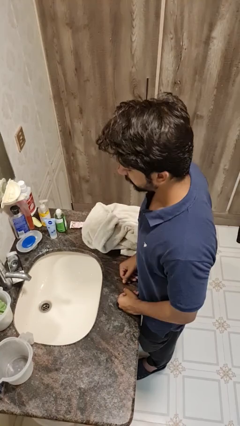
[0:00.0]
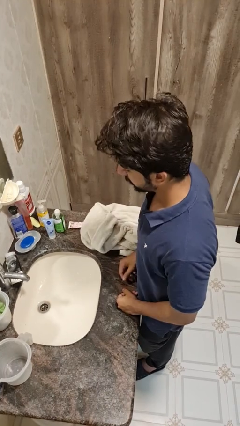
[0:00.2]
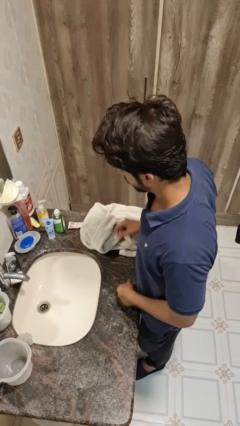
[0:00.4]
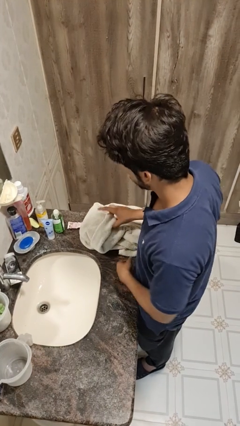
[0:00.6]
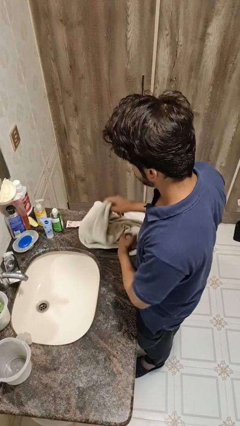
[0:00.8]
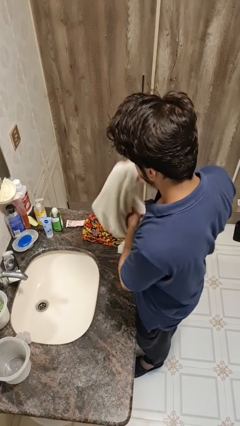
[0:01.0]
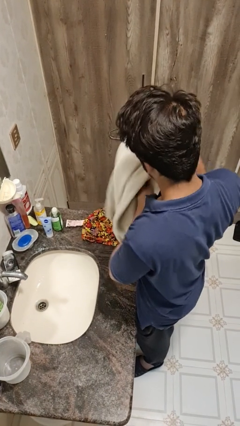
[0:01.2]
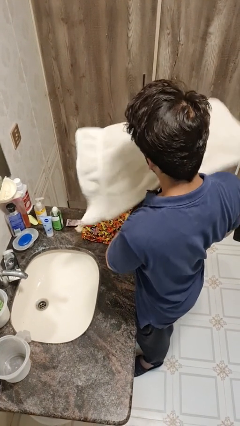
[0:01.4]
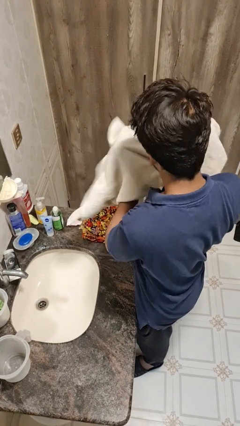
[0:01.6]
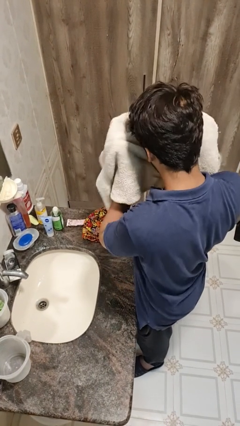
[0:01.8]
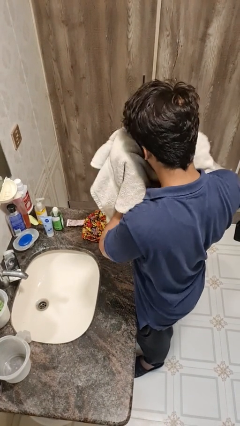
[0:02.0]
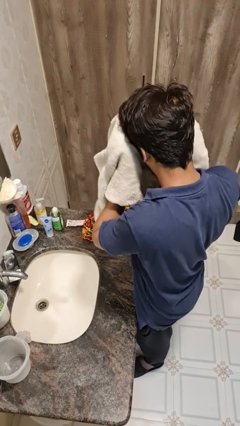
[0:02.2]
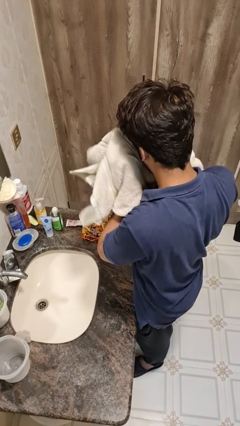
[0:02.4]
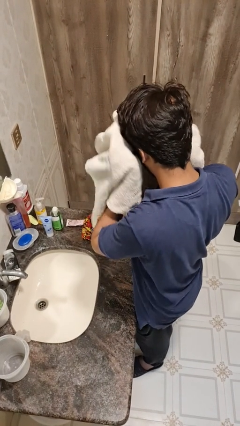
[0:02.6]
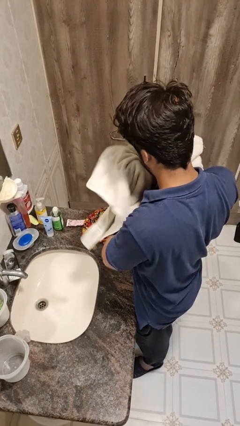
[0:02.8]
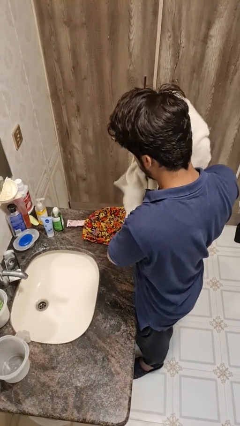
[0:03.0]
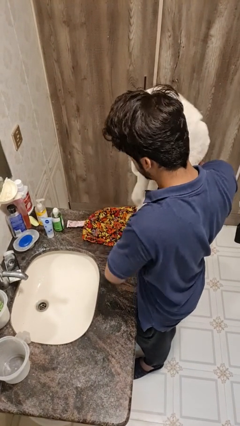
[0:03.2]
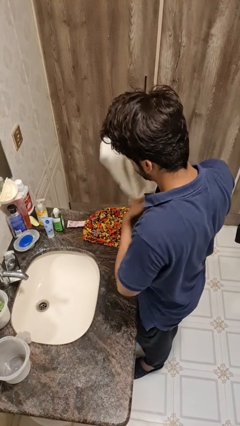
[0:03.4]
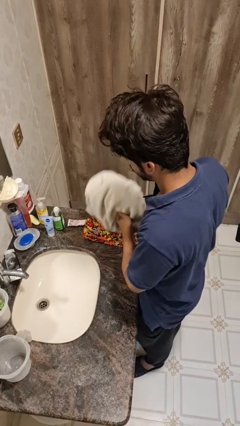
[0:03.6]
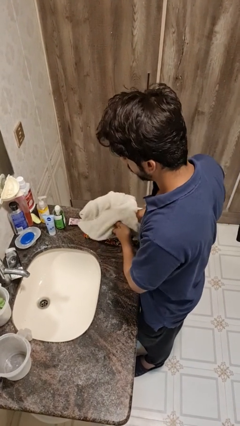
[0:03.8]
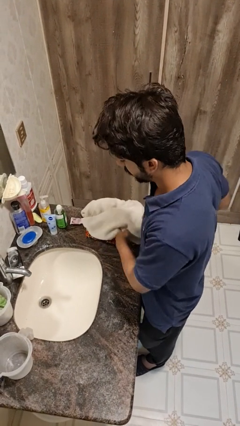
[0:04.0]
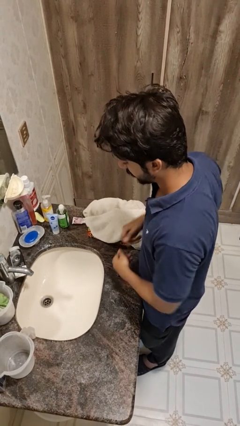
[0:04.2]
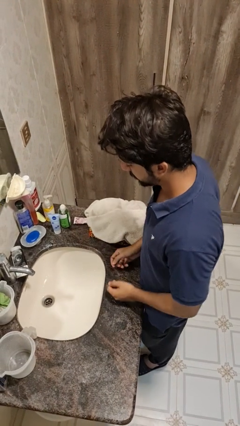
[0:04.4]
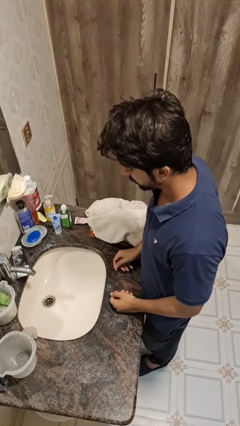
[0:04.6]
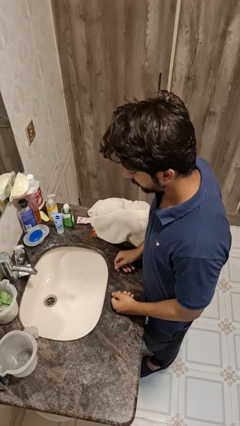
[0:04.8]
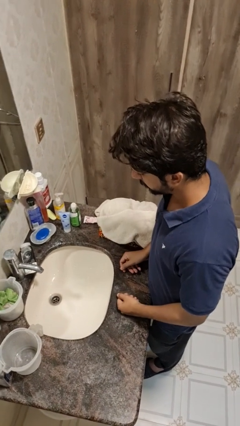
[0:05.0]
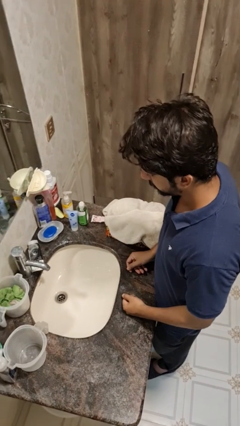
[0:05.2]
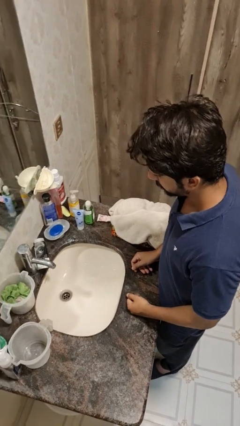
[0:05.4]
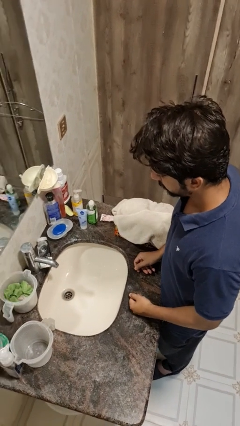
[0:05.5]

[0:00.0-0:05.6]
person dries face with towel

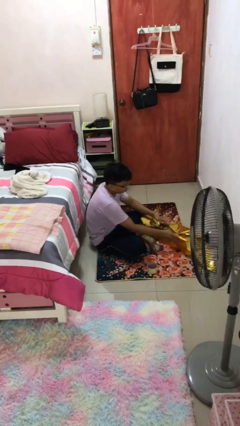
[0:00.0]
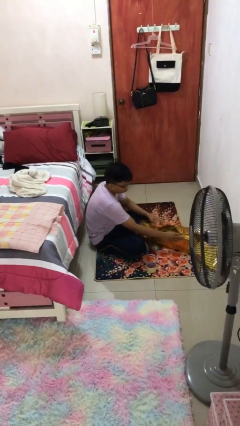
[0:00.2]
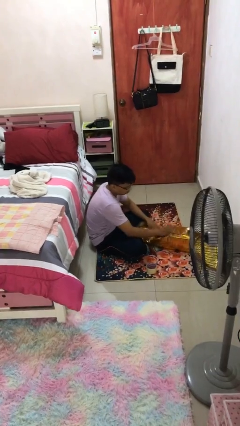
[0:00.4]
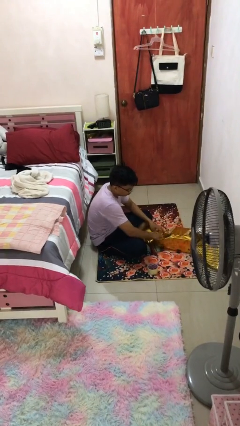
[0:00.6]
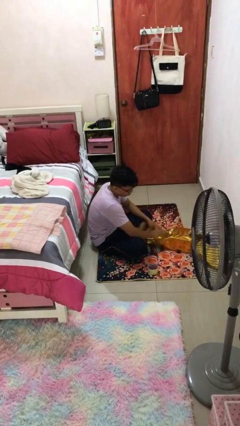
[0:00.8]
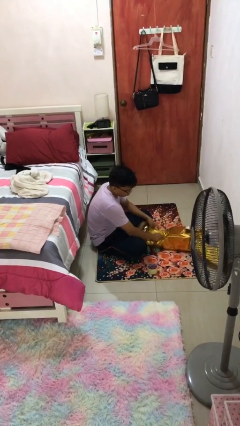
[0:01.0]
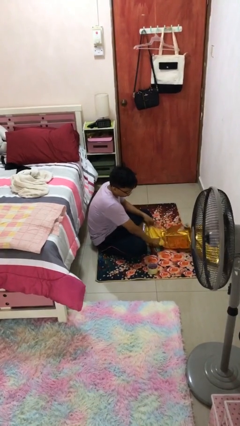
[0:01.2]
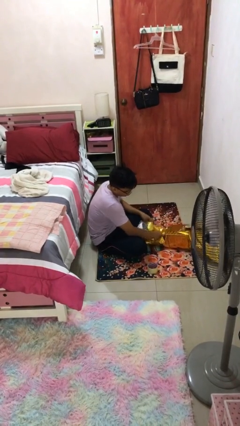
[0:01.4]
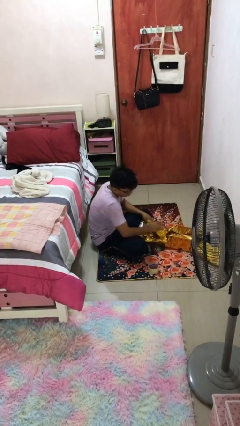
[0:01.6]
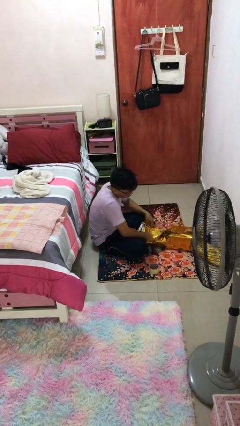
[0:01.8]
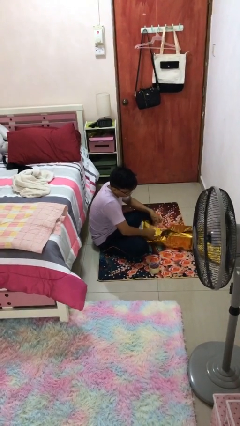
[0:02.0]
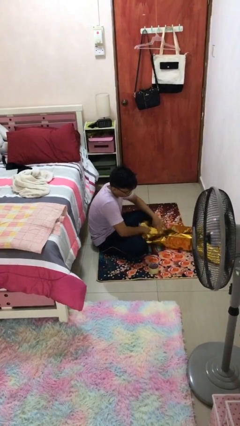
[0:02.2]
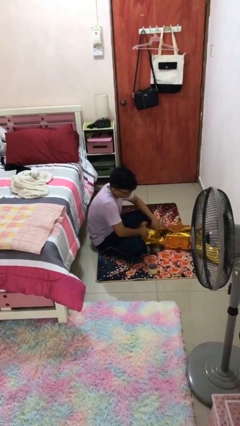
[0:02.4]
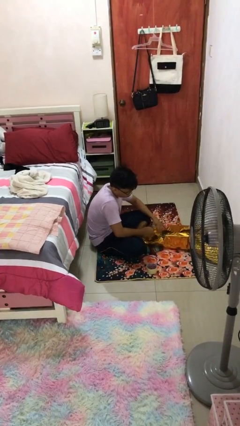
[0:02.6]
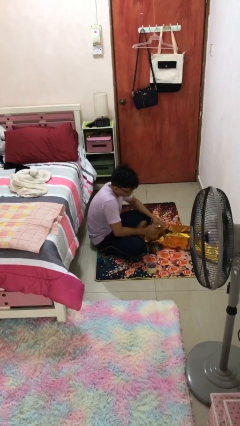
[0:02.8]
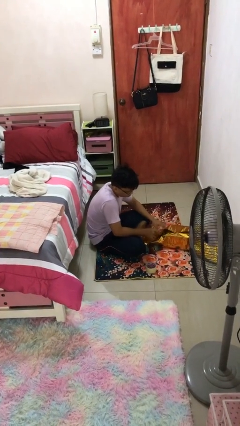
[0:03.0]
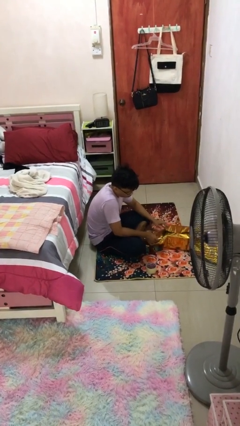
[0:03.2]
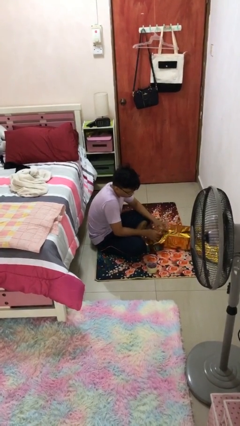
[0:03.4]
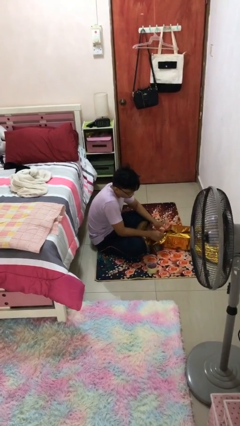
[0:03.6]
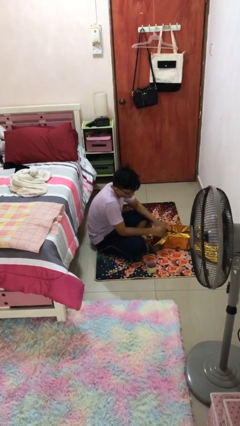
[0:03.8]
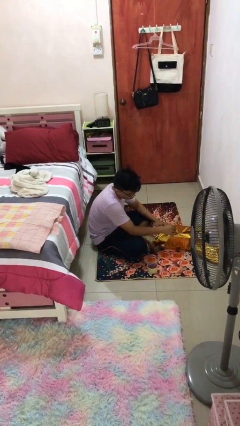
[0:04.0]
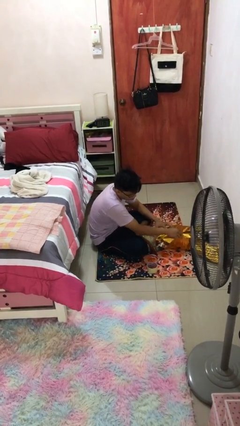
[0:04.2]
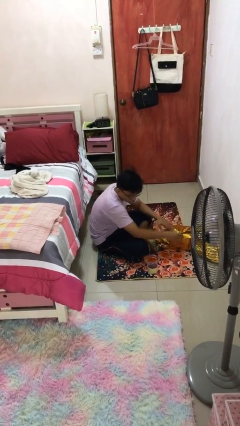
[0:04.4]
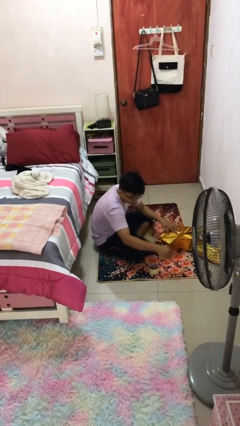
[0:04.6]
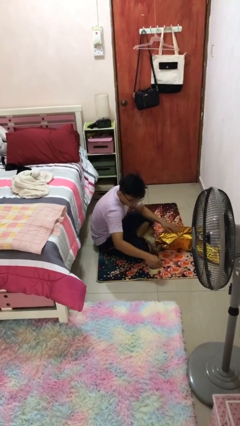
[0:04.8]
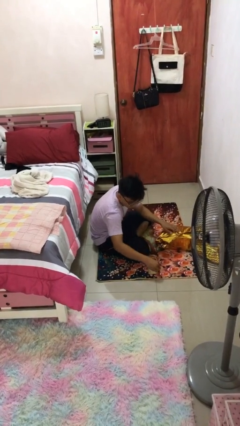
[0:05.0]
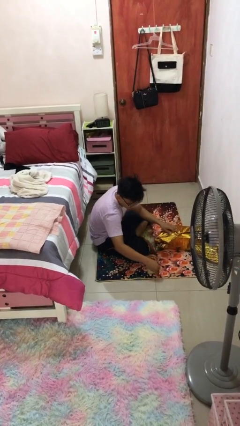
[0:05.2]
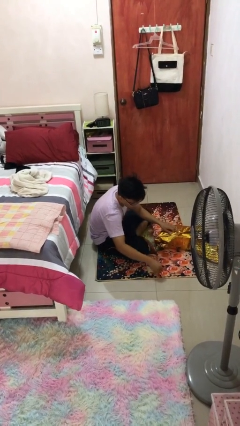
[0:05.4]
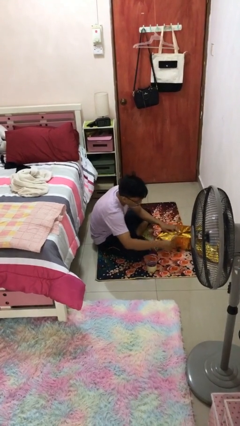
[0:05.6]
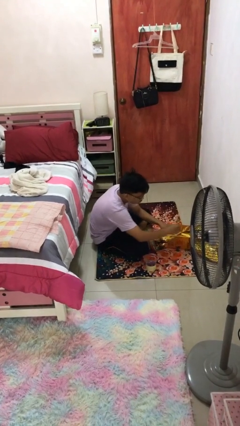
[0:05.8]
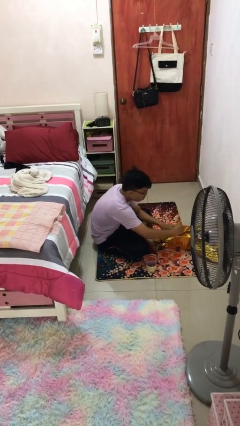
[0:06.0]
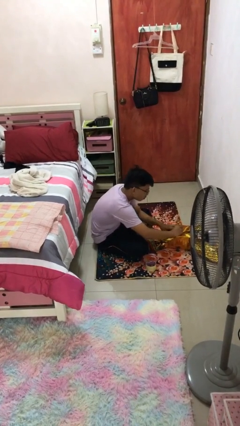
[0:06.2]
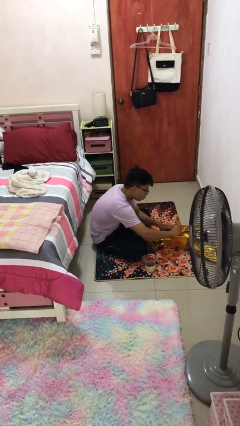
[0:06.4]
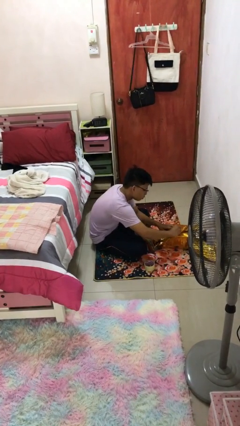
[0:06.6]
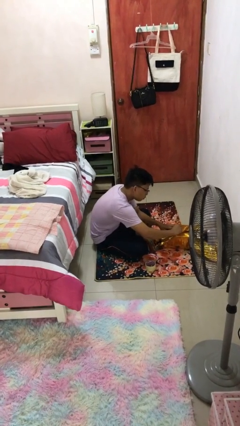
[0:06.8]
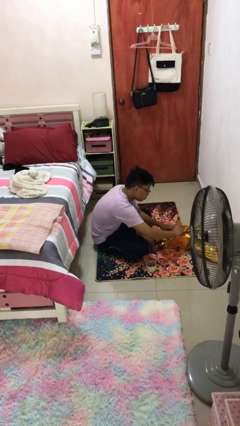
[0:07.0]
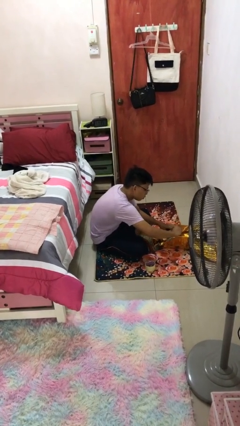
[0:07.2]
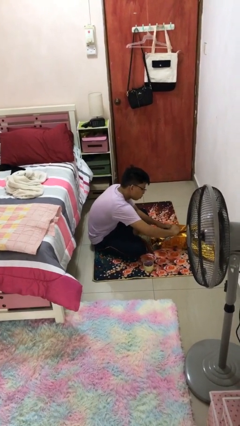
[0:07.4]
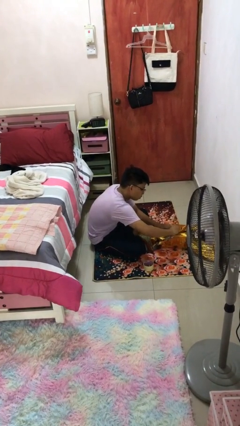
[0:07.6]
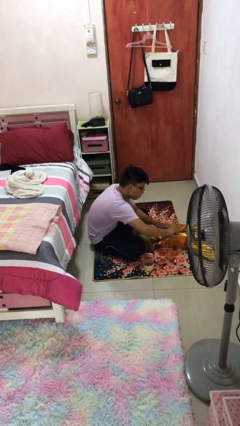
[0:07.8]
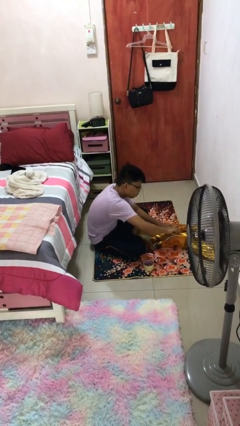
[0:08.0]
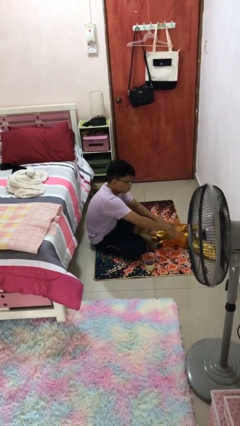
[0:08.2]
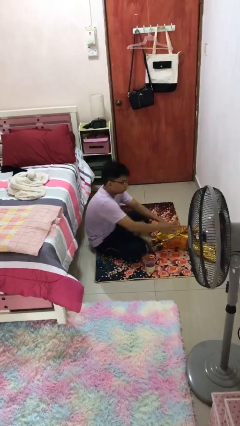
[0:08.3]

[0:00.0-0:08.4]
person wraps box

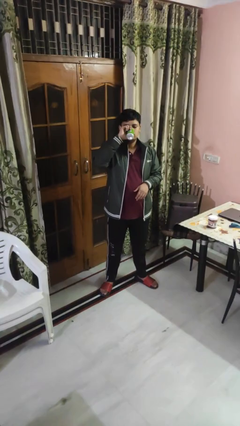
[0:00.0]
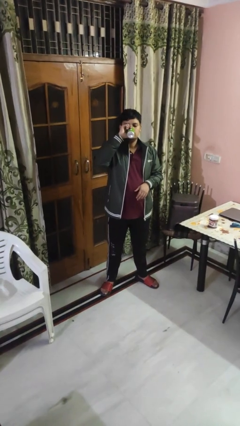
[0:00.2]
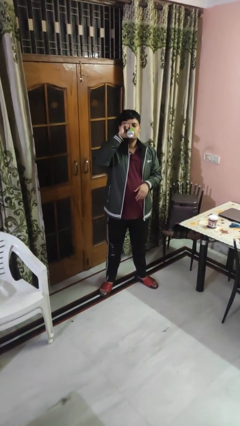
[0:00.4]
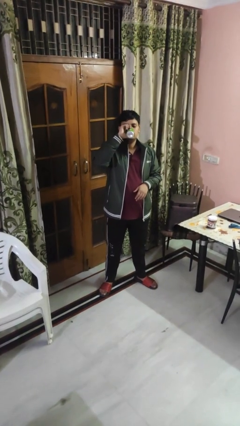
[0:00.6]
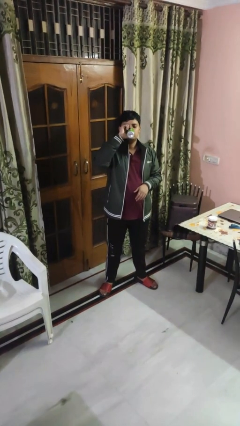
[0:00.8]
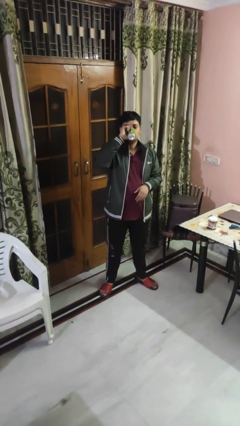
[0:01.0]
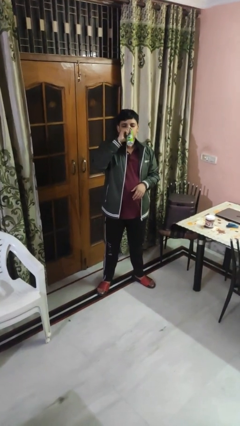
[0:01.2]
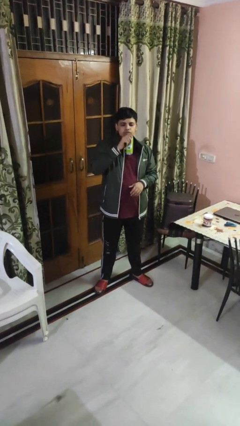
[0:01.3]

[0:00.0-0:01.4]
person drinks from beverage can

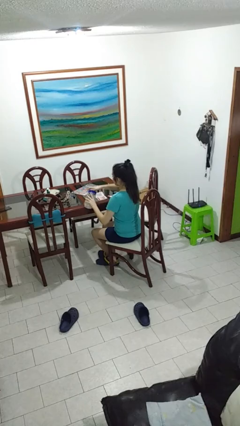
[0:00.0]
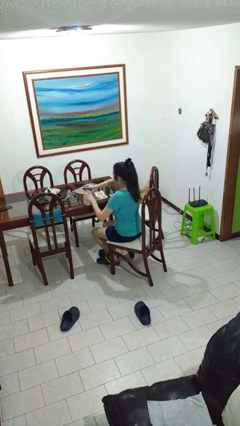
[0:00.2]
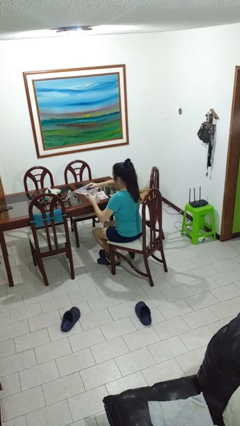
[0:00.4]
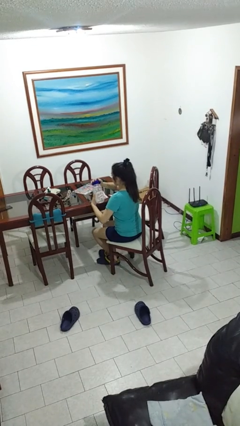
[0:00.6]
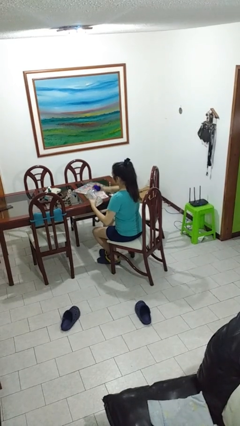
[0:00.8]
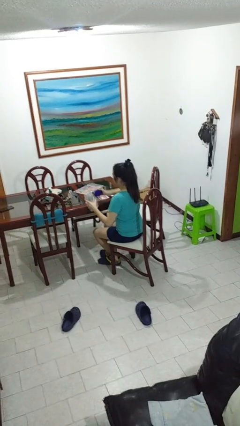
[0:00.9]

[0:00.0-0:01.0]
person opens jar

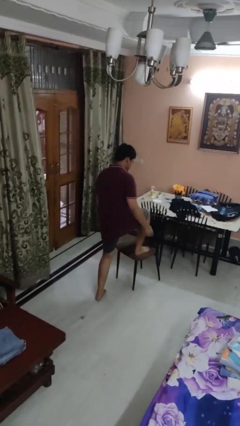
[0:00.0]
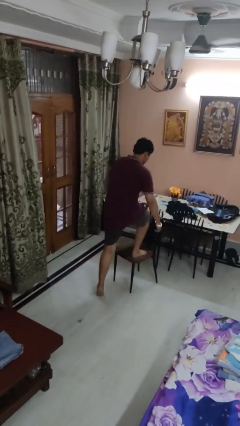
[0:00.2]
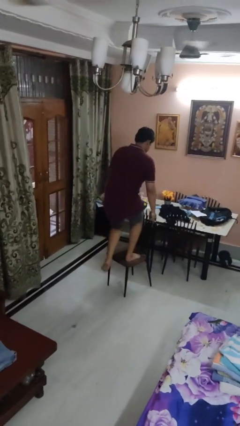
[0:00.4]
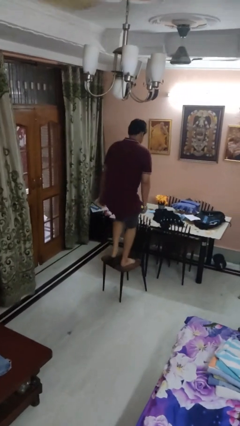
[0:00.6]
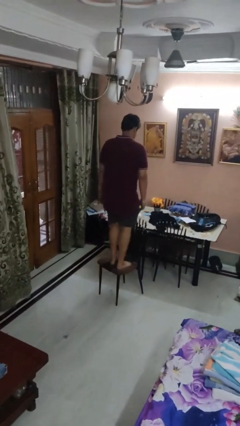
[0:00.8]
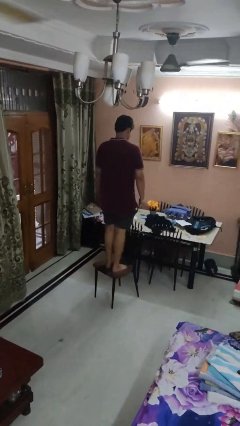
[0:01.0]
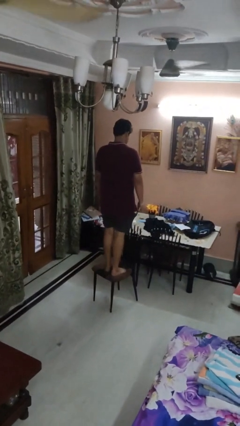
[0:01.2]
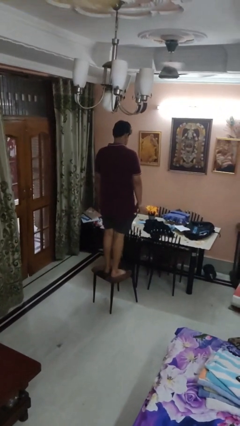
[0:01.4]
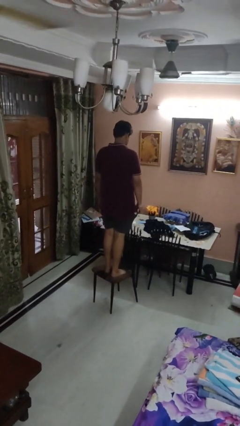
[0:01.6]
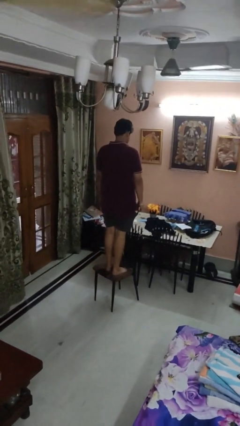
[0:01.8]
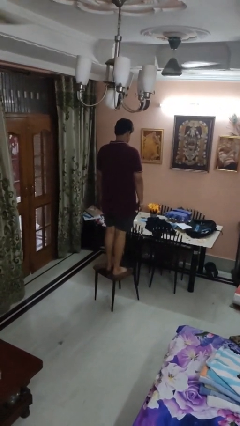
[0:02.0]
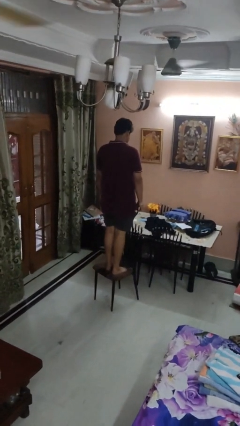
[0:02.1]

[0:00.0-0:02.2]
person climbs on chair
